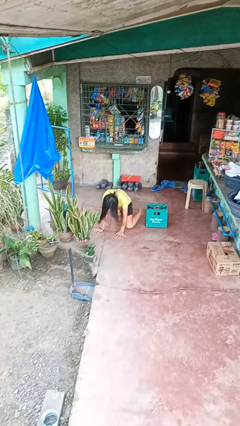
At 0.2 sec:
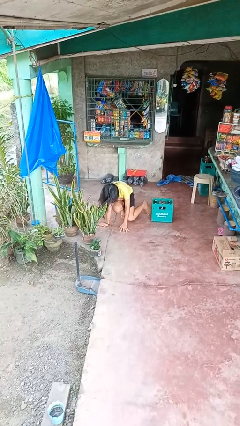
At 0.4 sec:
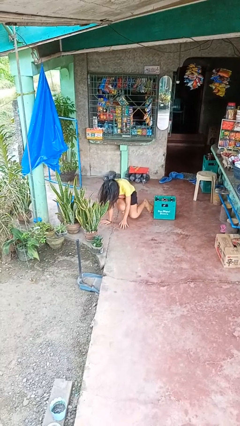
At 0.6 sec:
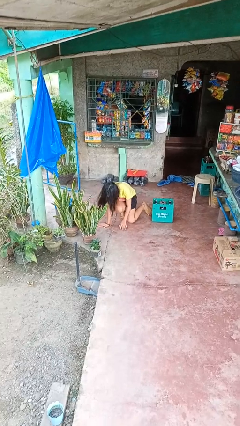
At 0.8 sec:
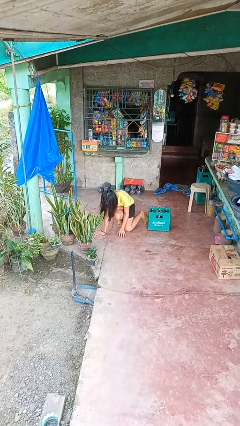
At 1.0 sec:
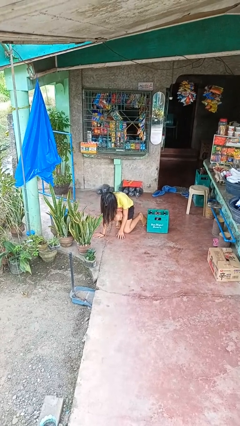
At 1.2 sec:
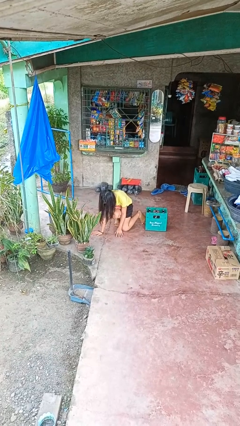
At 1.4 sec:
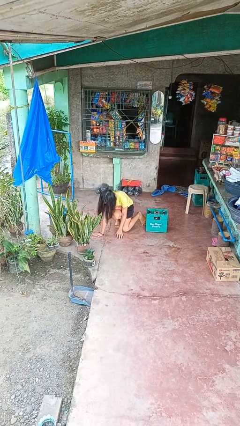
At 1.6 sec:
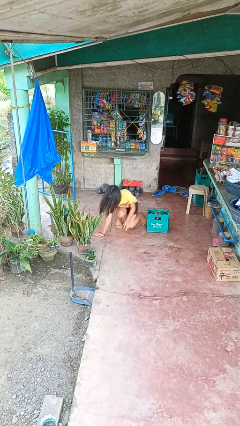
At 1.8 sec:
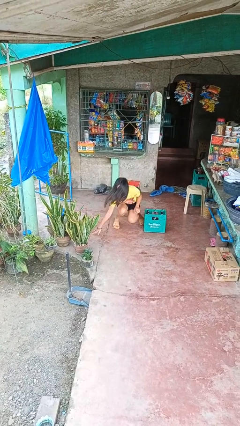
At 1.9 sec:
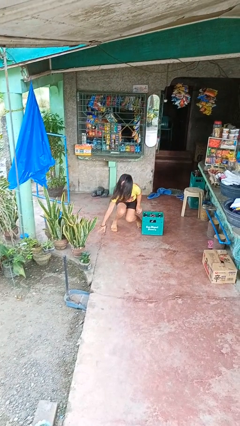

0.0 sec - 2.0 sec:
person lies down on floor

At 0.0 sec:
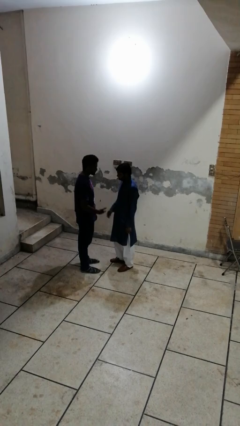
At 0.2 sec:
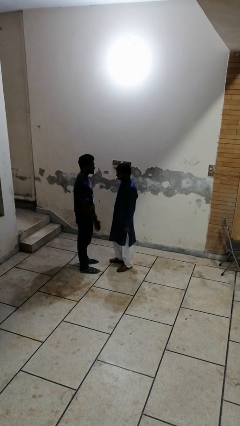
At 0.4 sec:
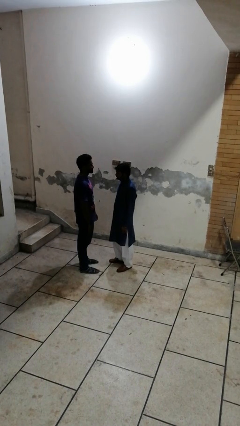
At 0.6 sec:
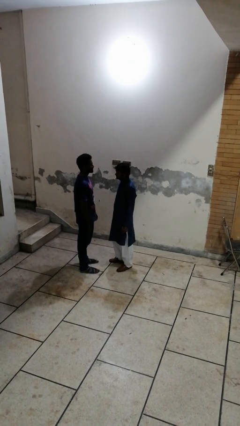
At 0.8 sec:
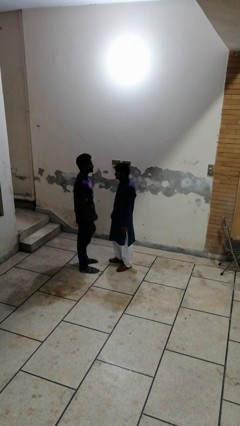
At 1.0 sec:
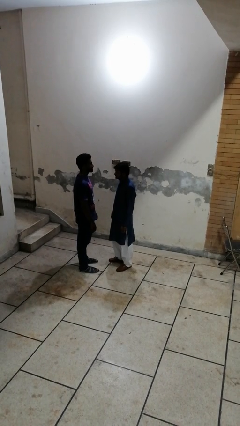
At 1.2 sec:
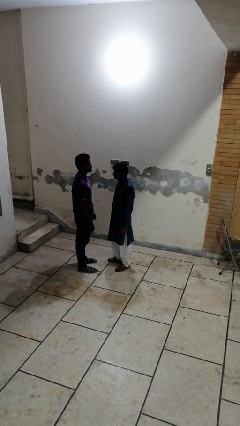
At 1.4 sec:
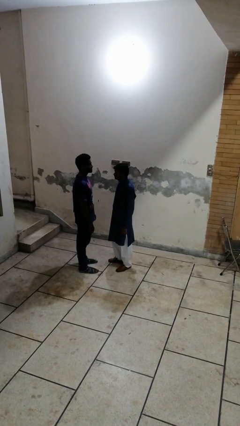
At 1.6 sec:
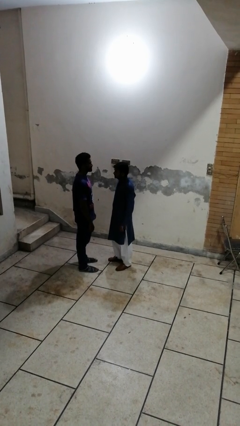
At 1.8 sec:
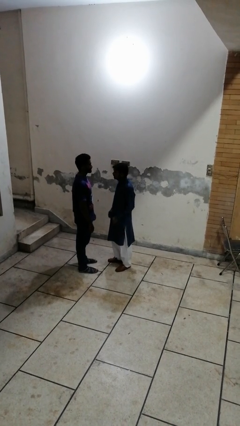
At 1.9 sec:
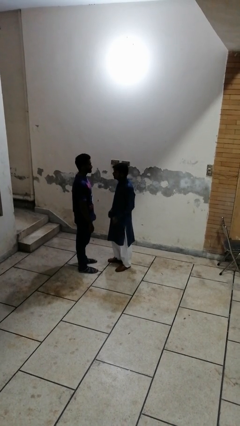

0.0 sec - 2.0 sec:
person highfives hand

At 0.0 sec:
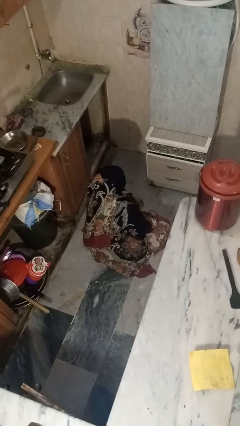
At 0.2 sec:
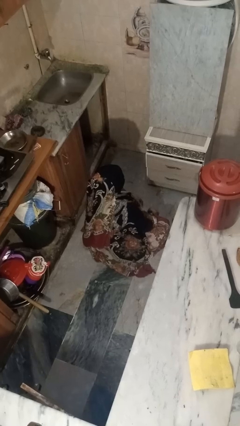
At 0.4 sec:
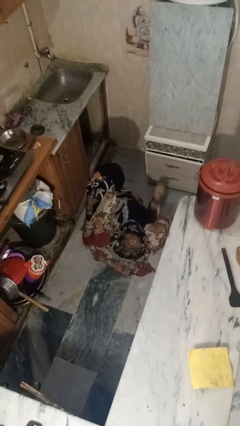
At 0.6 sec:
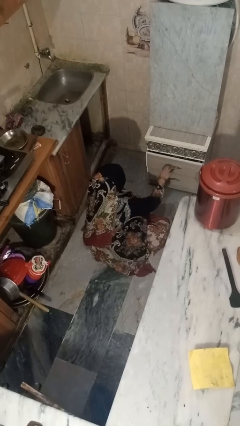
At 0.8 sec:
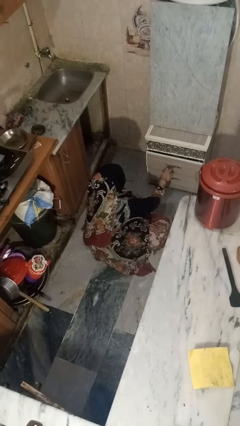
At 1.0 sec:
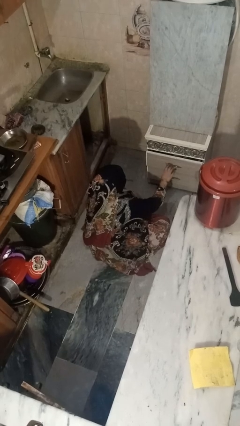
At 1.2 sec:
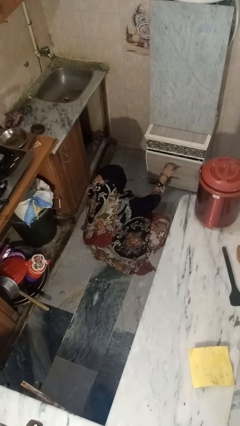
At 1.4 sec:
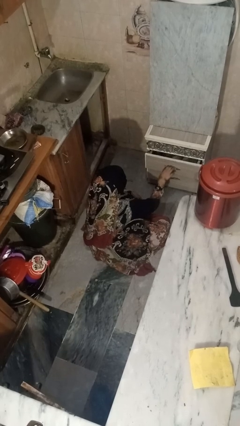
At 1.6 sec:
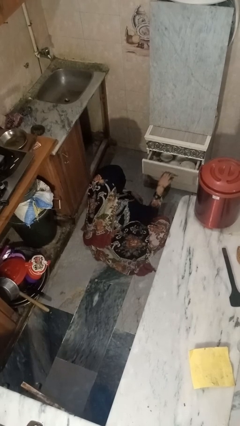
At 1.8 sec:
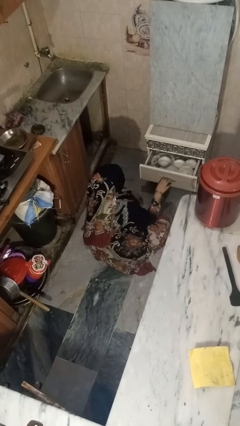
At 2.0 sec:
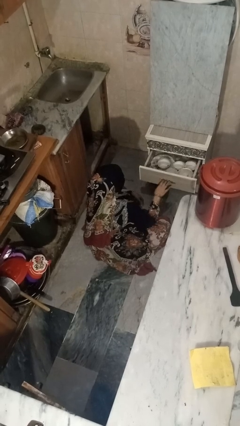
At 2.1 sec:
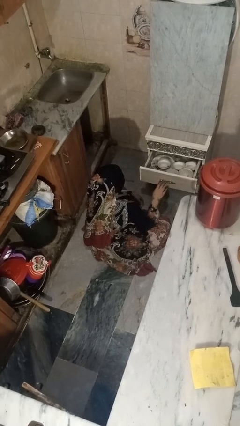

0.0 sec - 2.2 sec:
person opens kitchen drawer

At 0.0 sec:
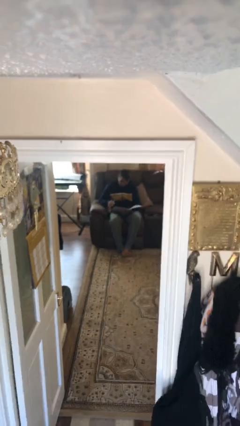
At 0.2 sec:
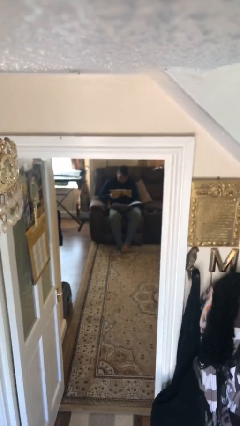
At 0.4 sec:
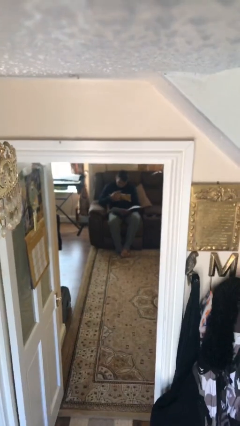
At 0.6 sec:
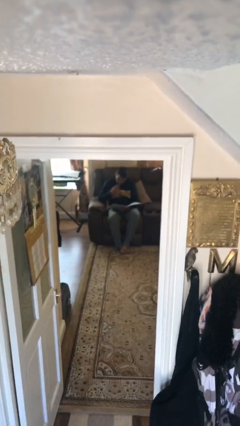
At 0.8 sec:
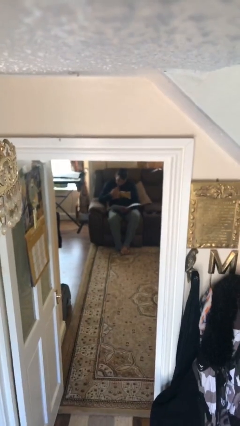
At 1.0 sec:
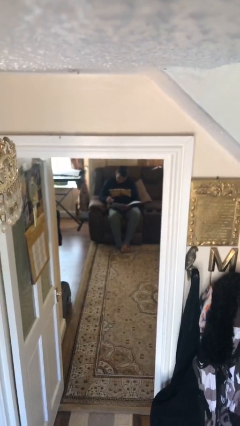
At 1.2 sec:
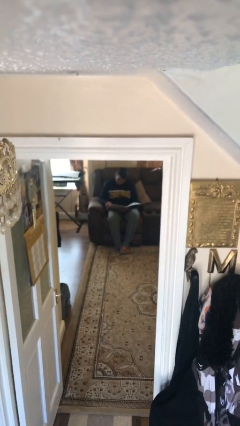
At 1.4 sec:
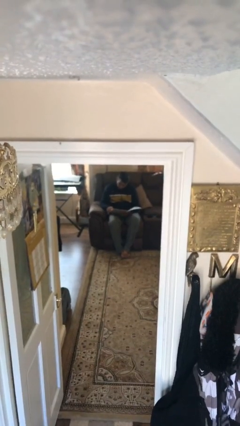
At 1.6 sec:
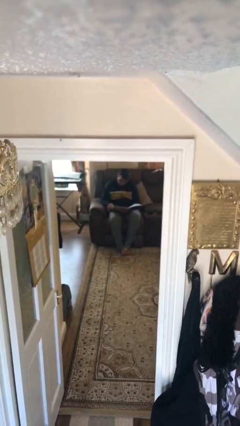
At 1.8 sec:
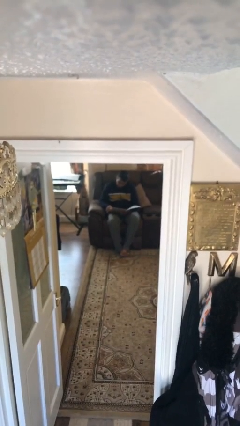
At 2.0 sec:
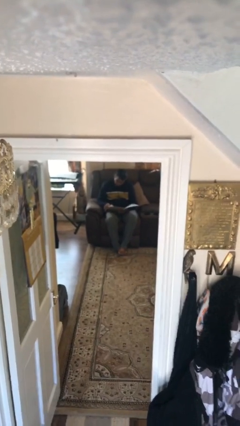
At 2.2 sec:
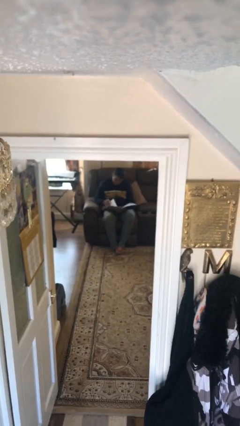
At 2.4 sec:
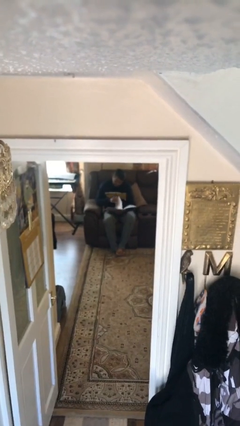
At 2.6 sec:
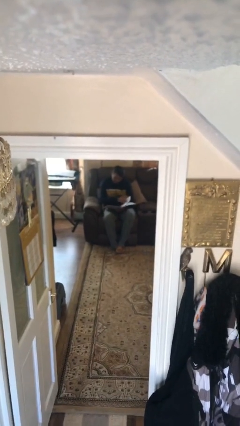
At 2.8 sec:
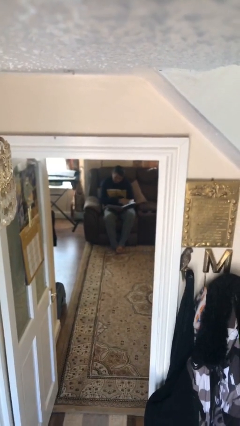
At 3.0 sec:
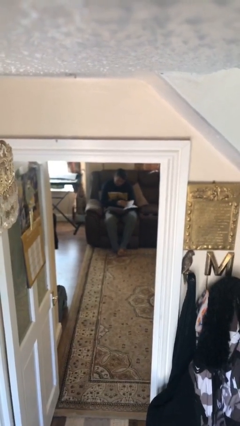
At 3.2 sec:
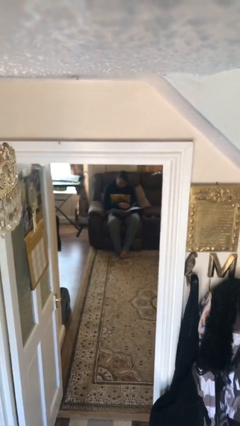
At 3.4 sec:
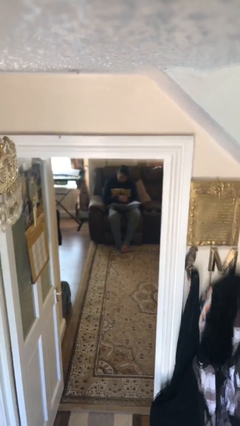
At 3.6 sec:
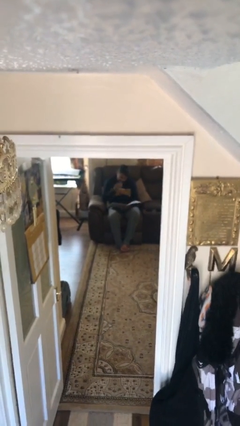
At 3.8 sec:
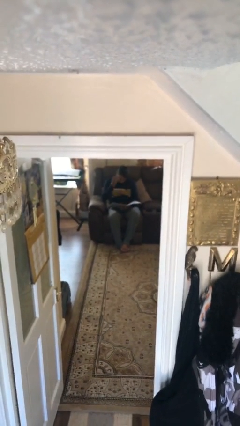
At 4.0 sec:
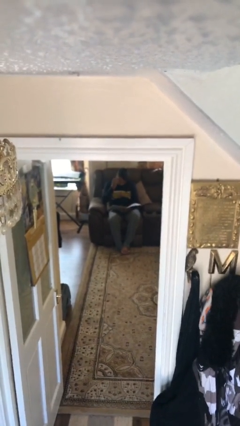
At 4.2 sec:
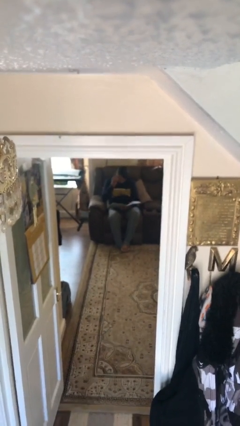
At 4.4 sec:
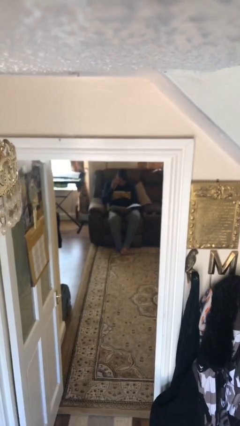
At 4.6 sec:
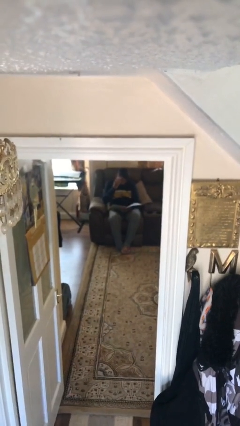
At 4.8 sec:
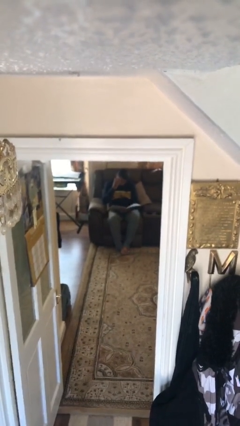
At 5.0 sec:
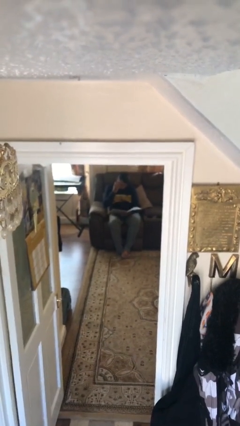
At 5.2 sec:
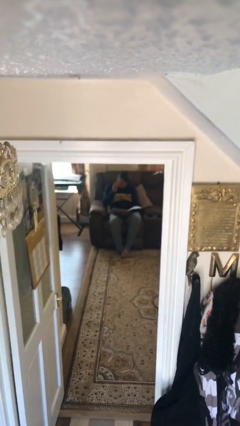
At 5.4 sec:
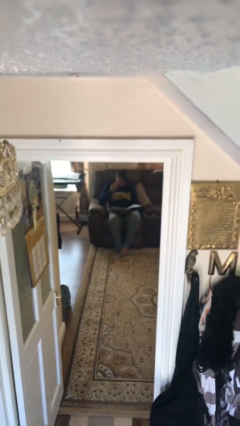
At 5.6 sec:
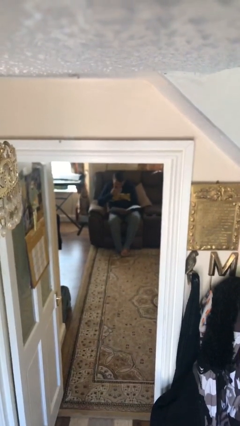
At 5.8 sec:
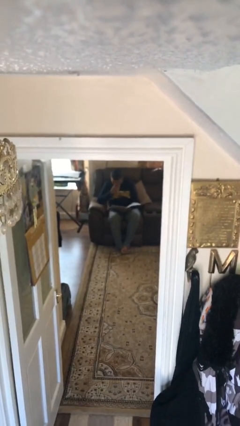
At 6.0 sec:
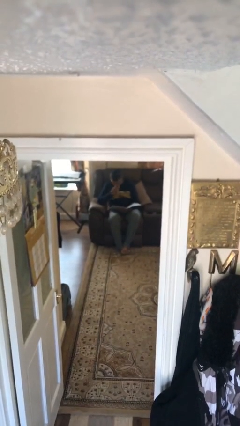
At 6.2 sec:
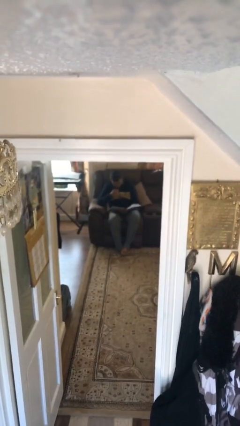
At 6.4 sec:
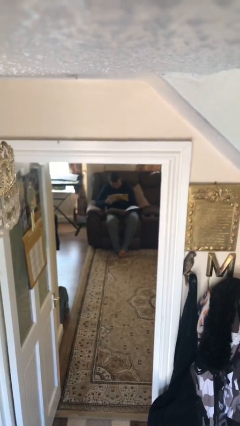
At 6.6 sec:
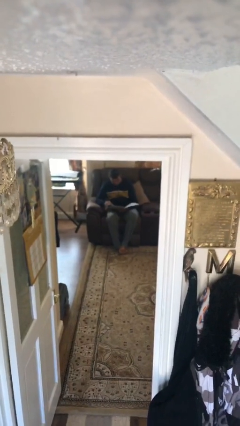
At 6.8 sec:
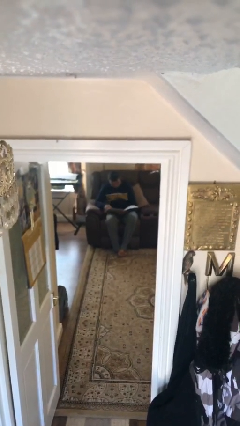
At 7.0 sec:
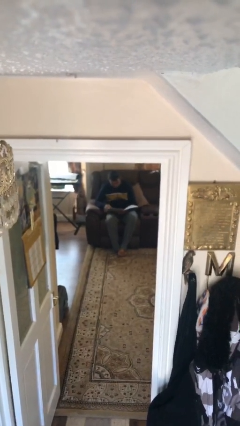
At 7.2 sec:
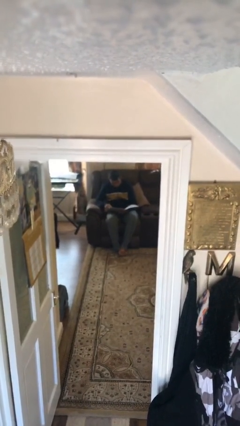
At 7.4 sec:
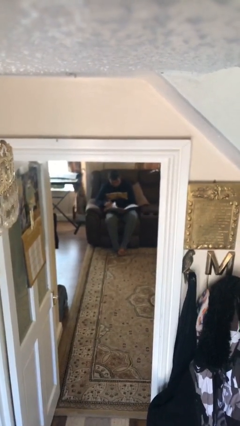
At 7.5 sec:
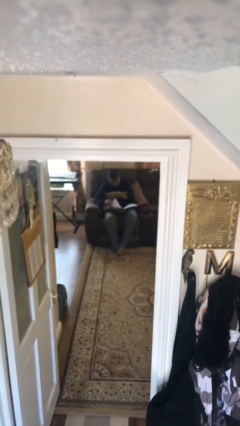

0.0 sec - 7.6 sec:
person reads document

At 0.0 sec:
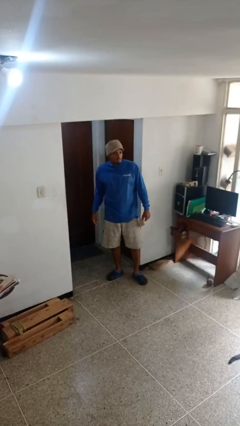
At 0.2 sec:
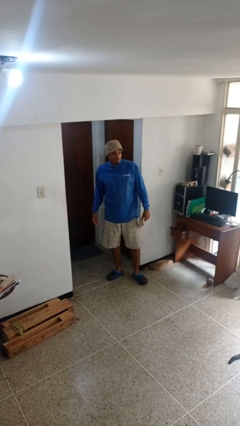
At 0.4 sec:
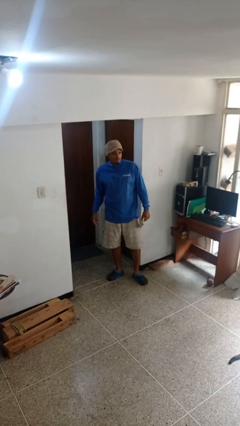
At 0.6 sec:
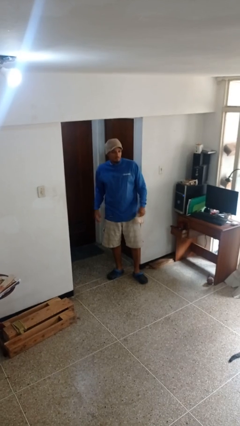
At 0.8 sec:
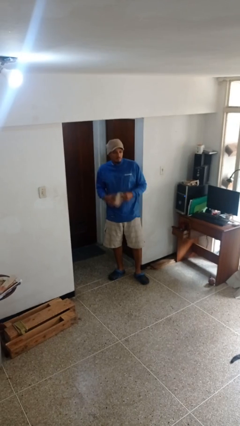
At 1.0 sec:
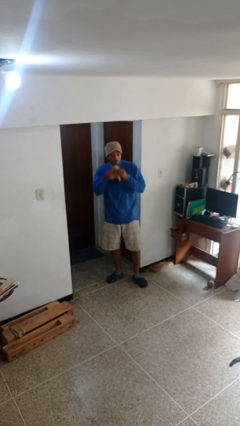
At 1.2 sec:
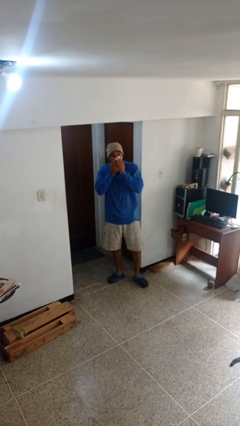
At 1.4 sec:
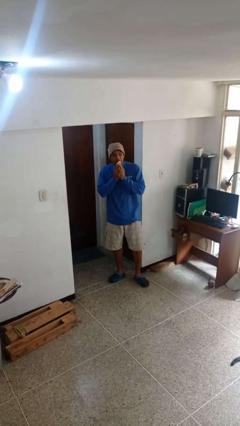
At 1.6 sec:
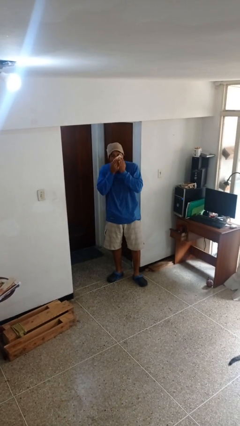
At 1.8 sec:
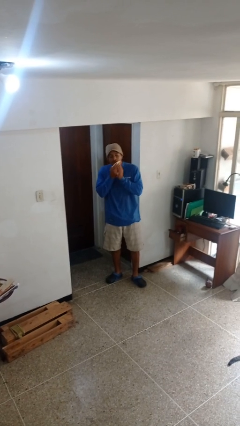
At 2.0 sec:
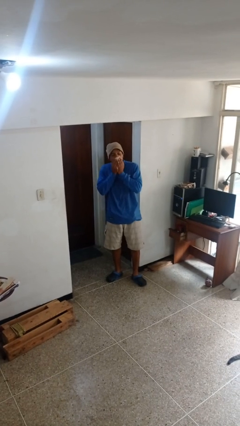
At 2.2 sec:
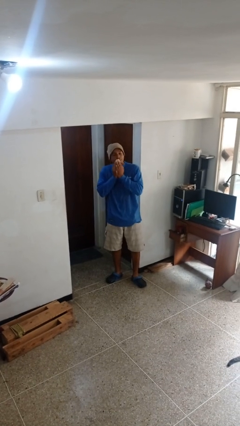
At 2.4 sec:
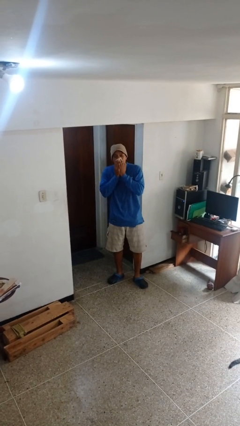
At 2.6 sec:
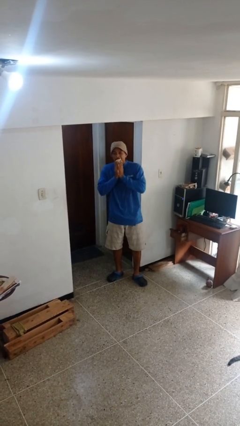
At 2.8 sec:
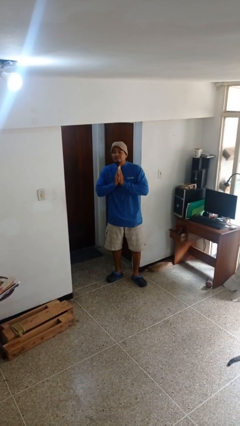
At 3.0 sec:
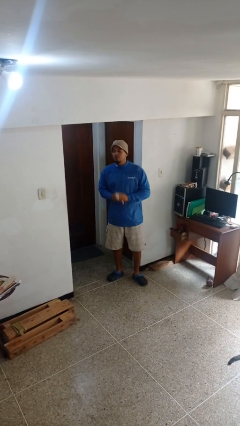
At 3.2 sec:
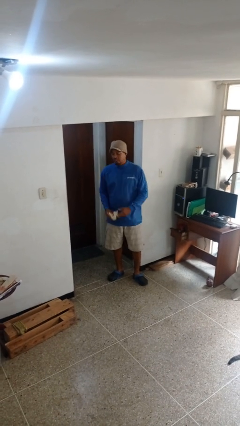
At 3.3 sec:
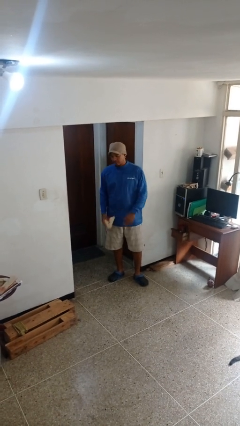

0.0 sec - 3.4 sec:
person wipes mouth with napkin

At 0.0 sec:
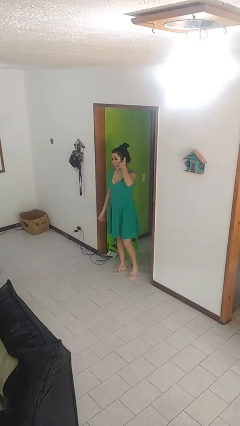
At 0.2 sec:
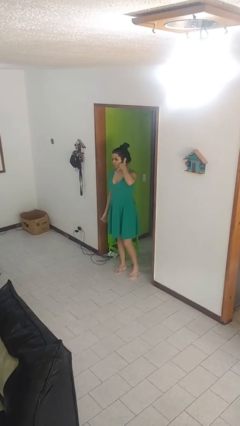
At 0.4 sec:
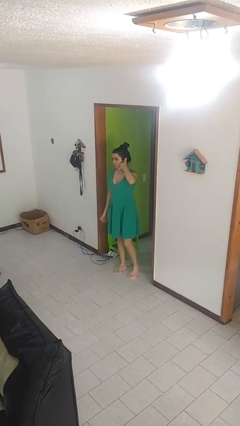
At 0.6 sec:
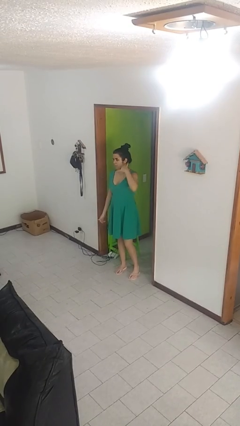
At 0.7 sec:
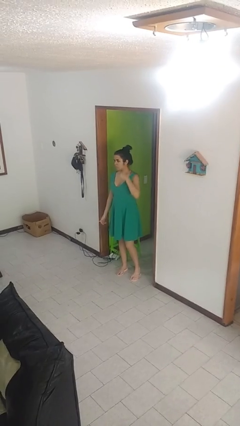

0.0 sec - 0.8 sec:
person gestures call me
